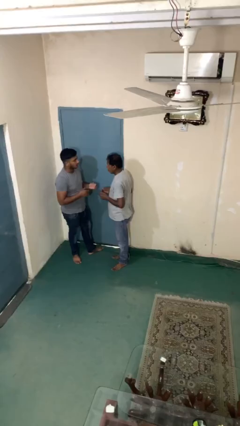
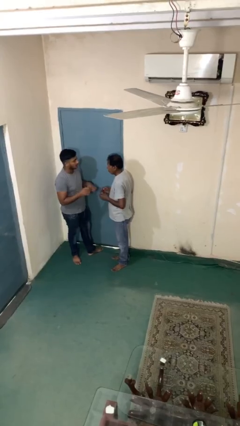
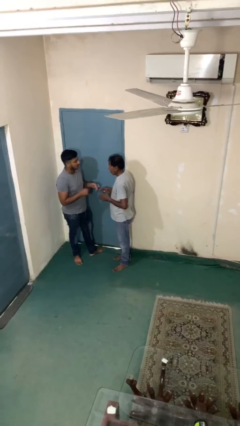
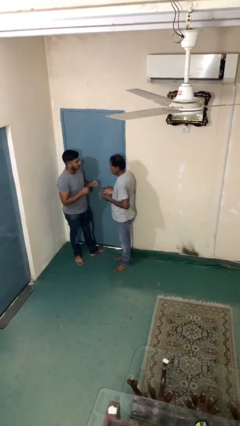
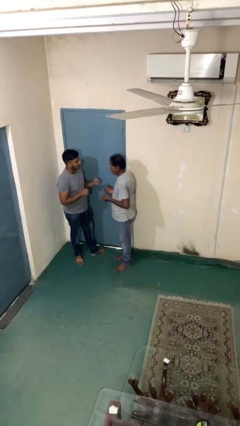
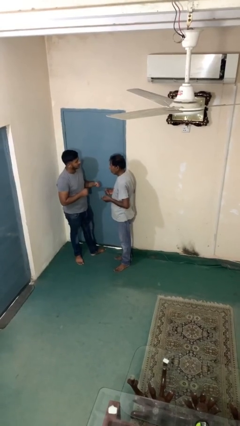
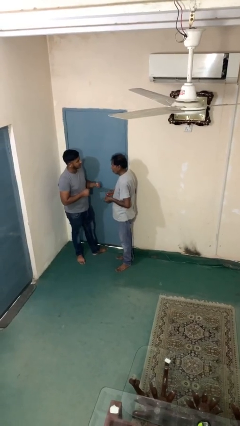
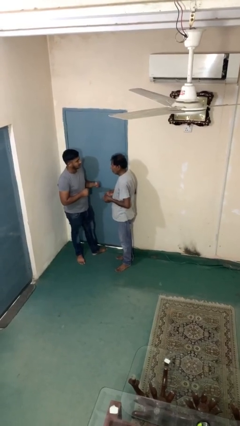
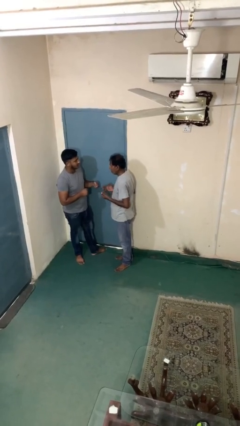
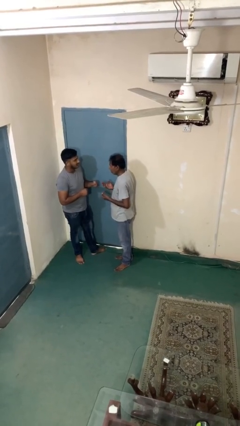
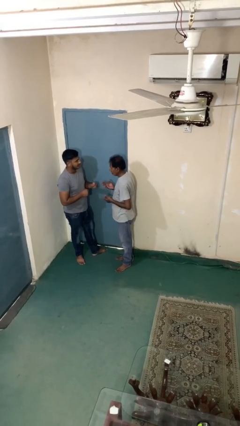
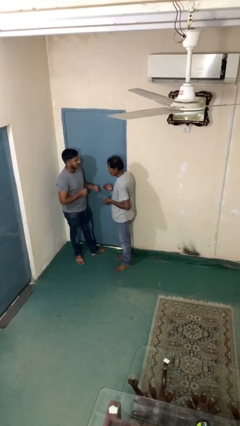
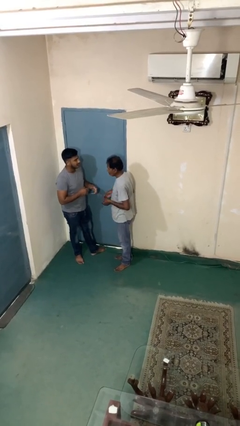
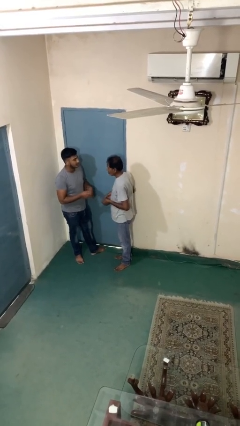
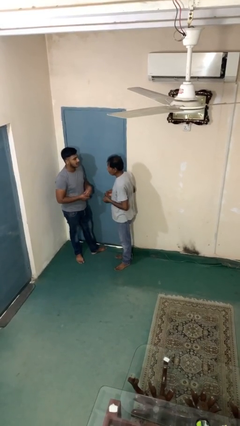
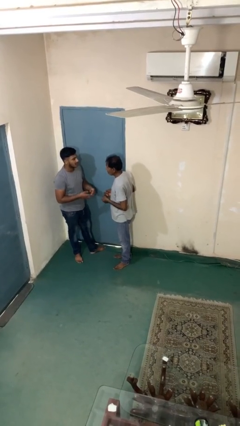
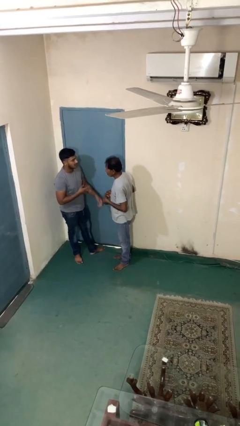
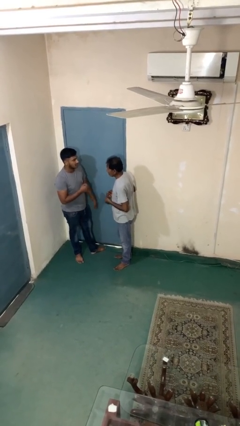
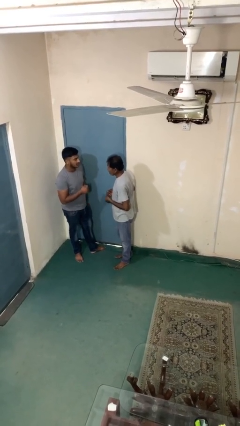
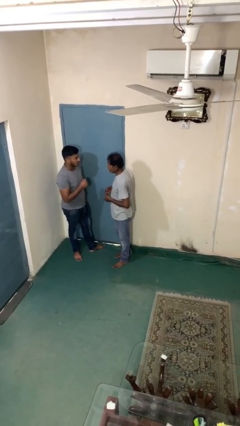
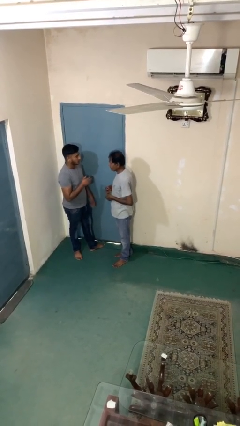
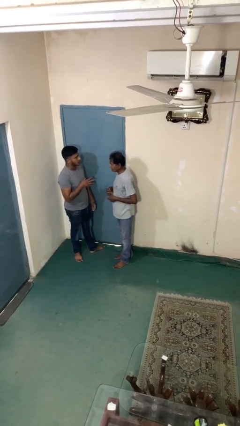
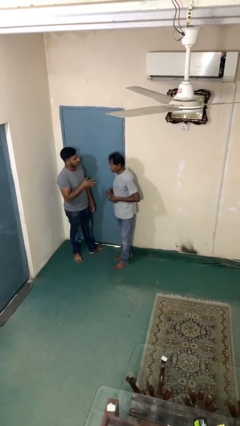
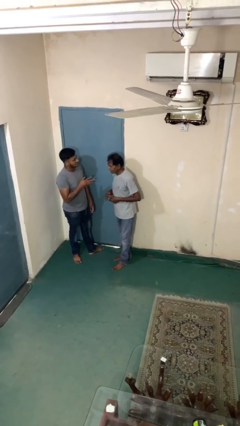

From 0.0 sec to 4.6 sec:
person talks to person

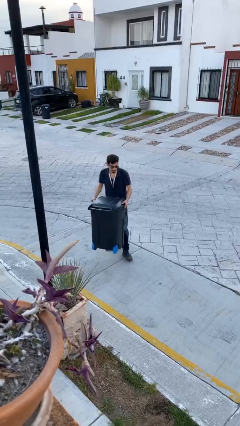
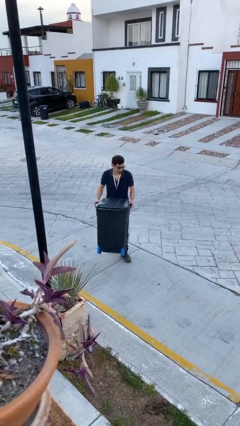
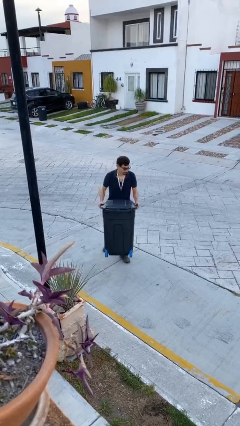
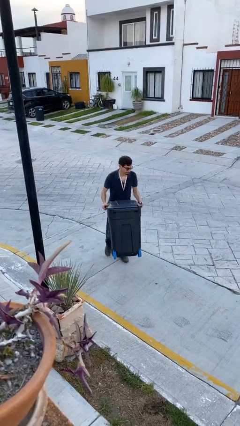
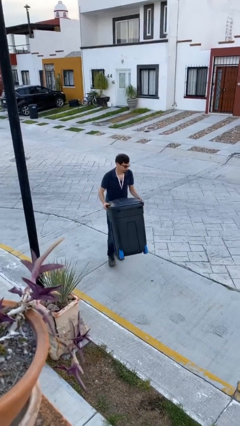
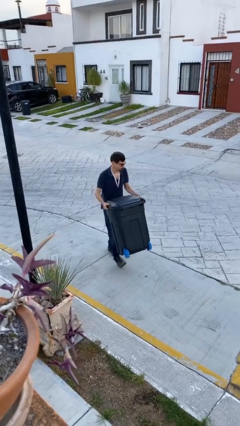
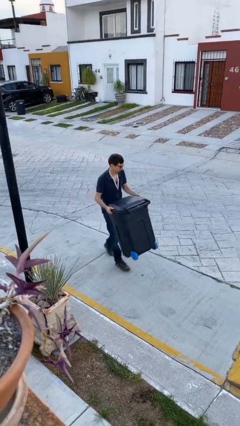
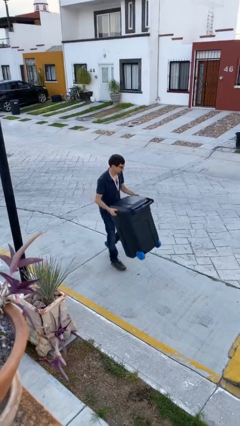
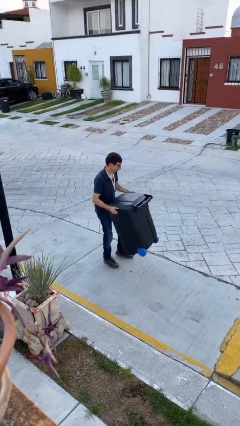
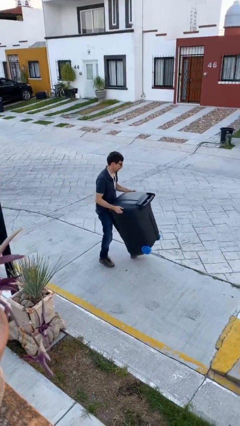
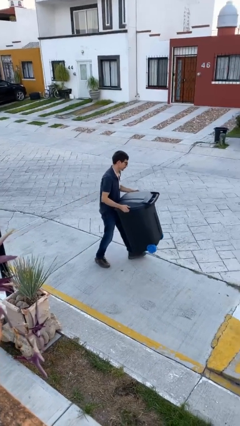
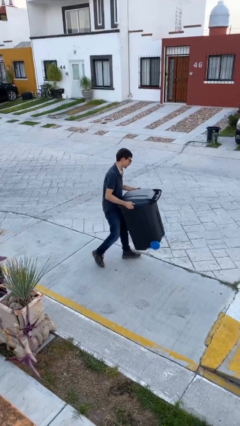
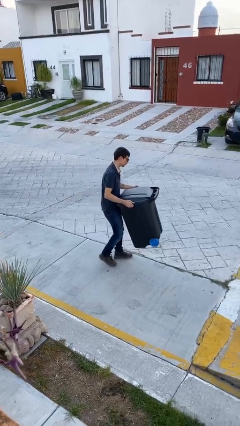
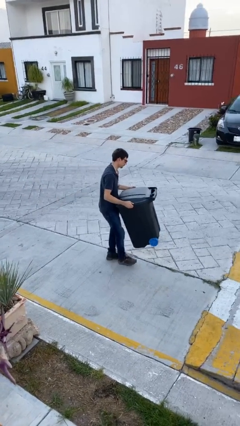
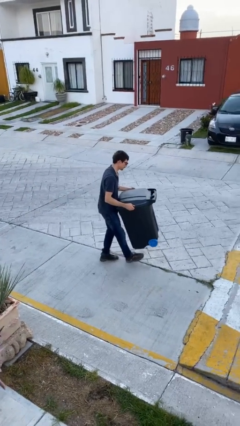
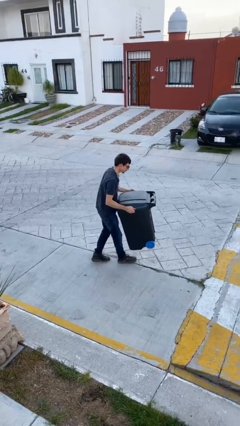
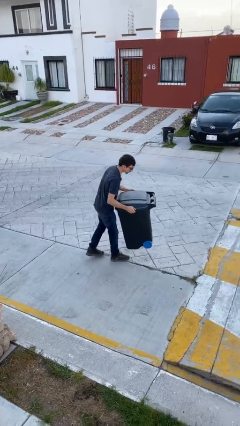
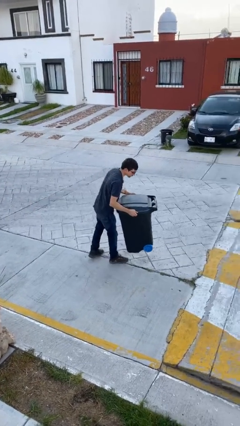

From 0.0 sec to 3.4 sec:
person carries heavy object

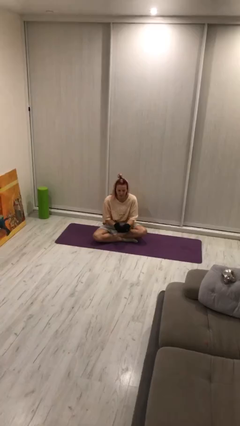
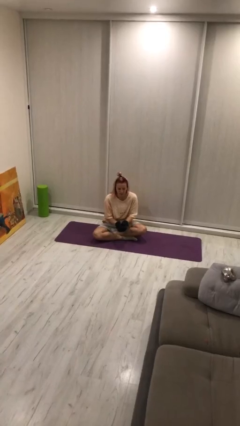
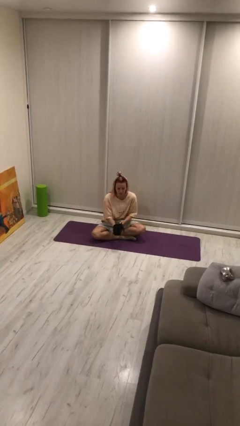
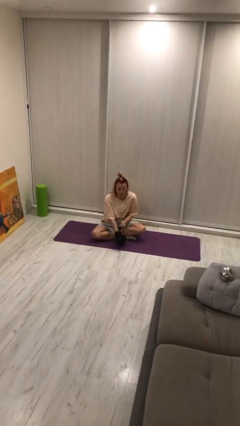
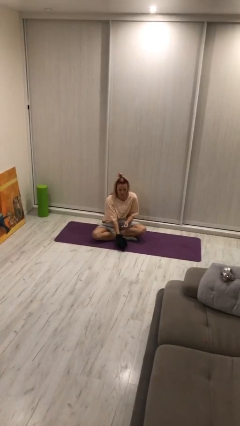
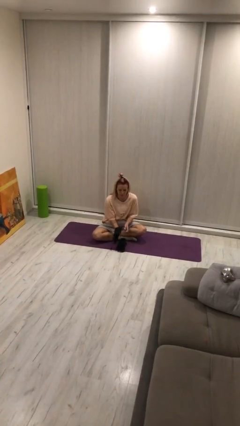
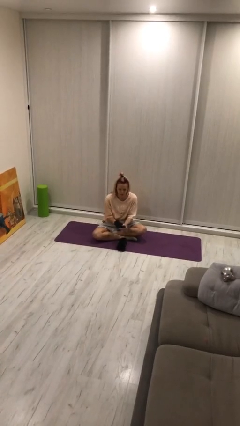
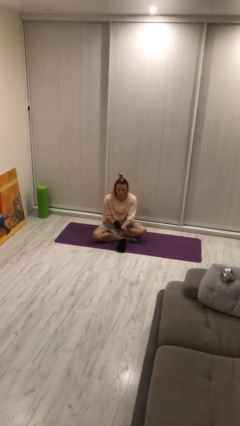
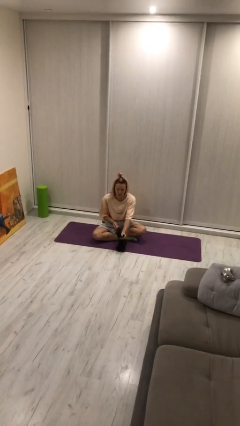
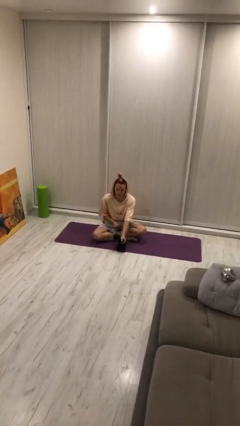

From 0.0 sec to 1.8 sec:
person takes off gloves

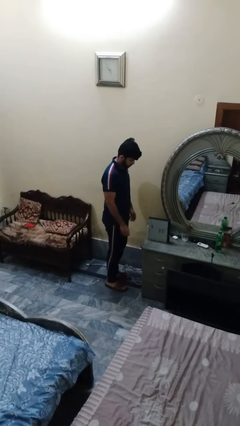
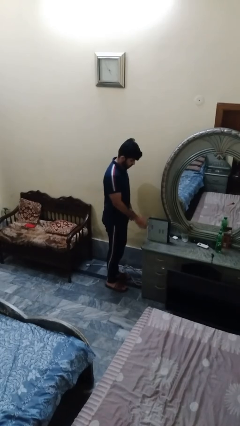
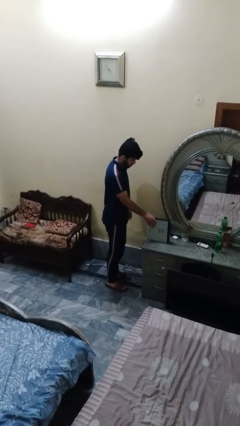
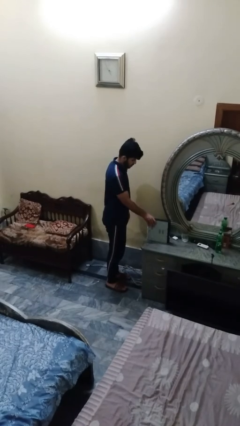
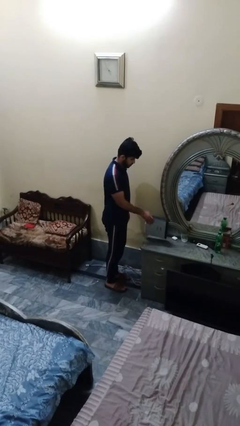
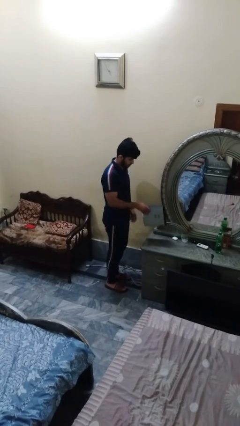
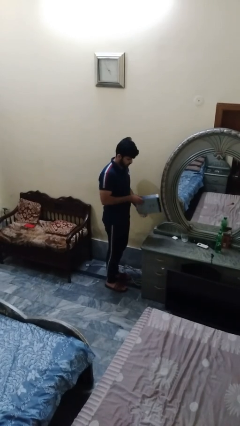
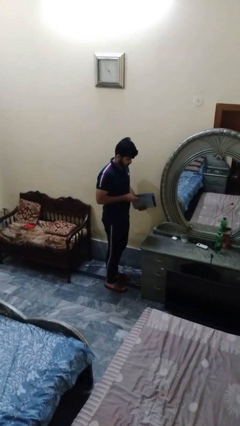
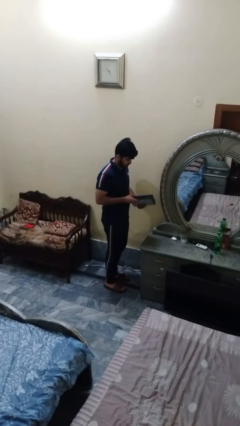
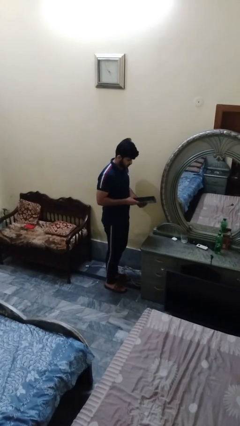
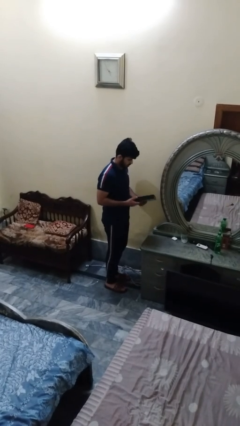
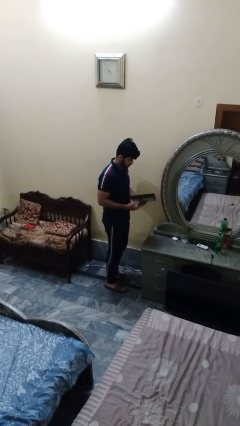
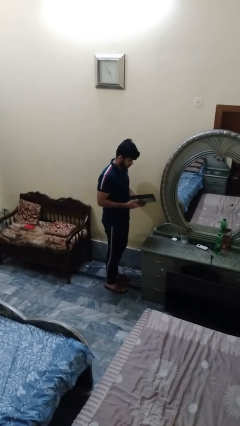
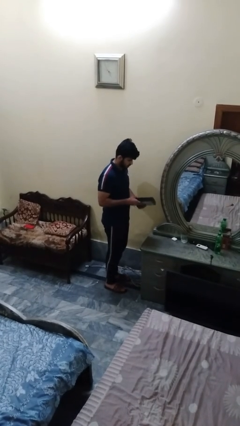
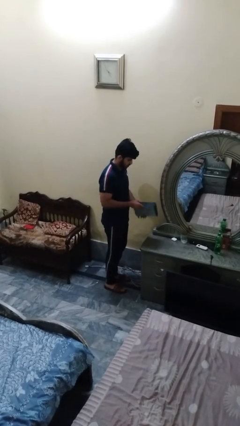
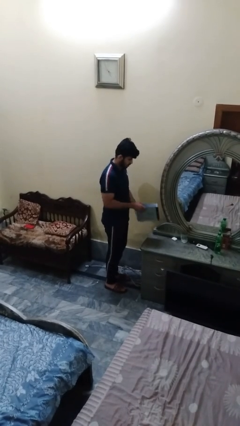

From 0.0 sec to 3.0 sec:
person picks up object from countertop

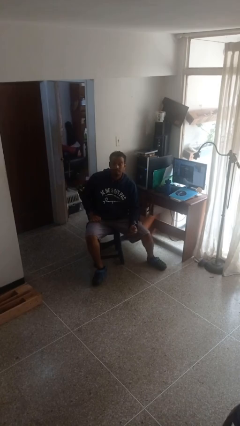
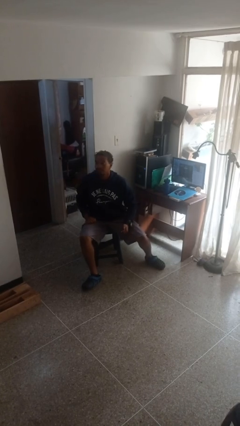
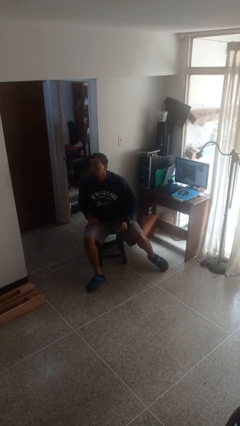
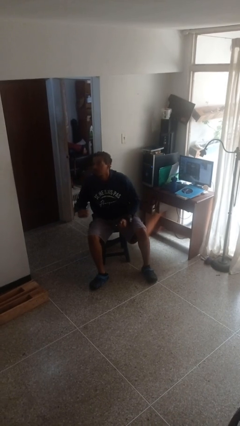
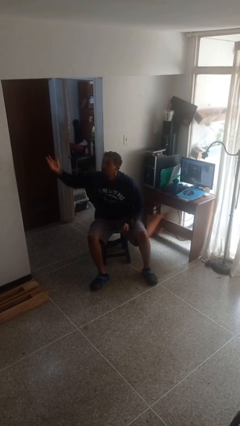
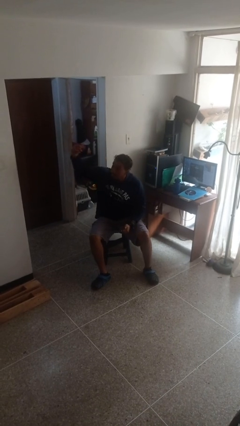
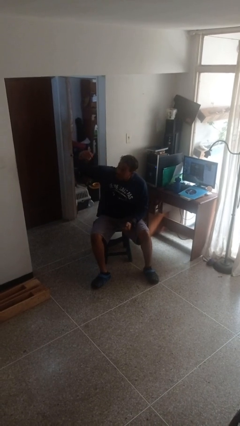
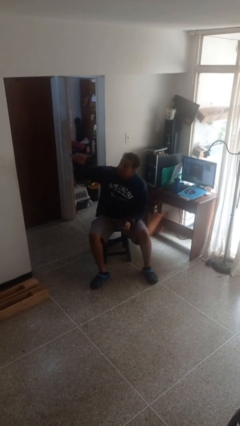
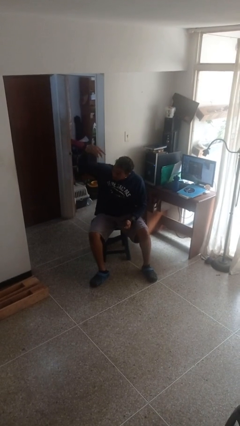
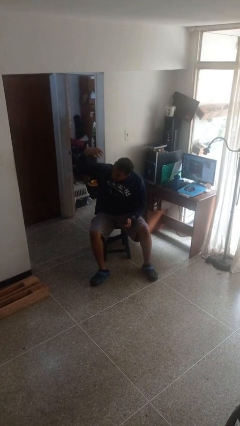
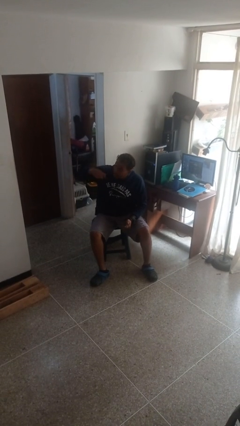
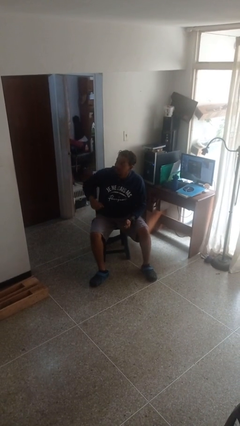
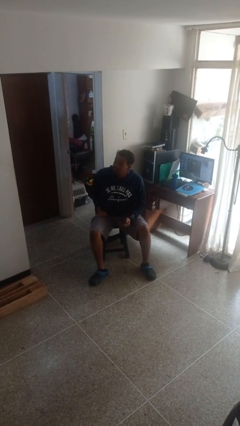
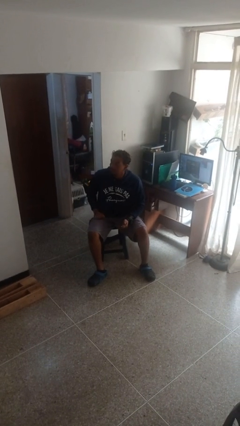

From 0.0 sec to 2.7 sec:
person gestures come here

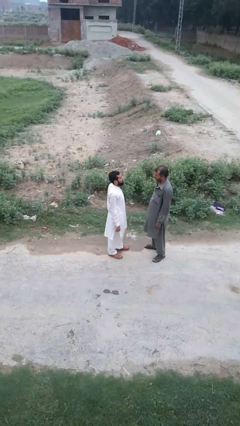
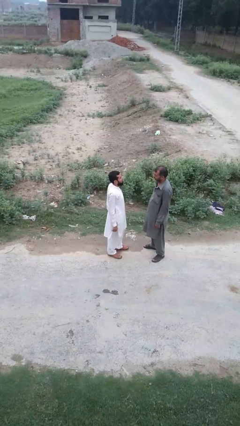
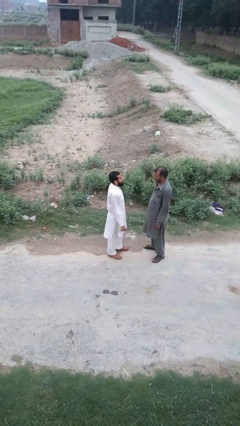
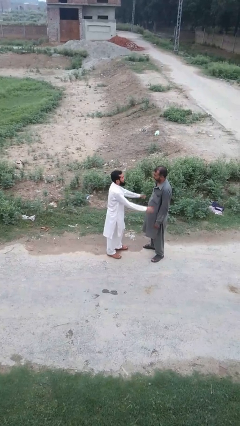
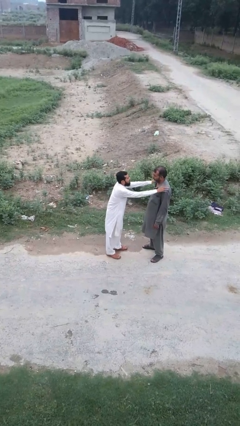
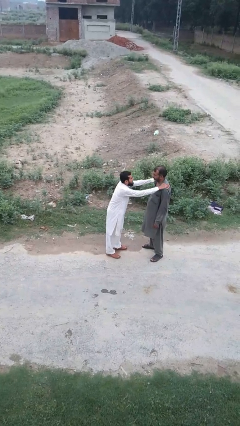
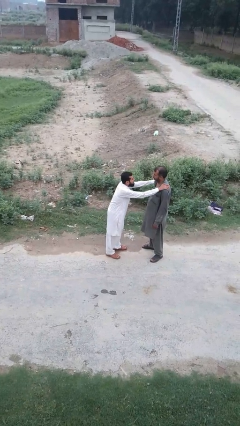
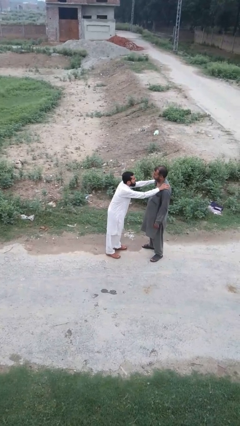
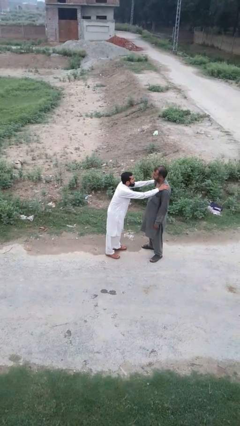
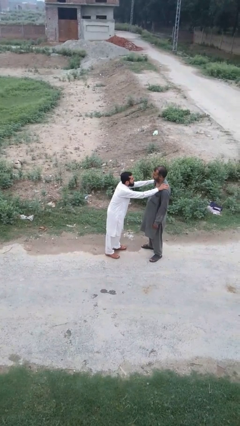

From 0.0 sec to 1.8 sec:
person pounds shoulders of person
